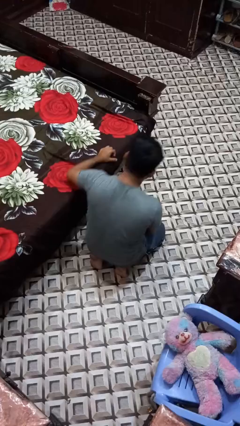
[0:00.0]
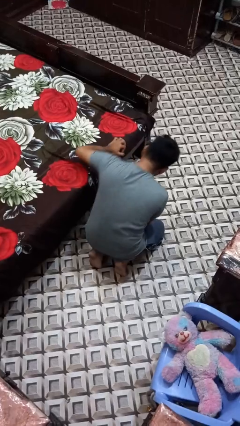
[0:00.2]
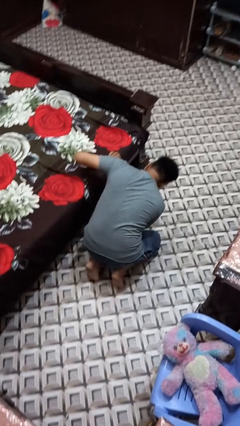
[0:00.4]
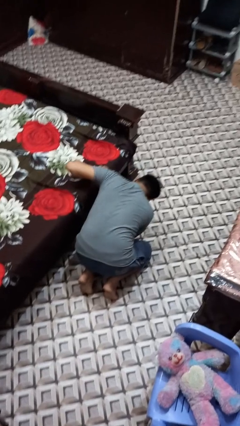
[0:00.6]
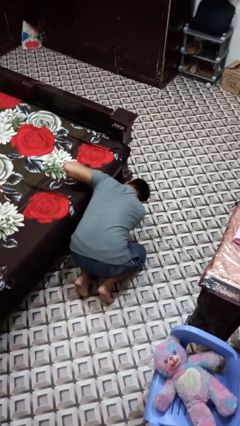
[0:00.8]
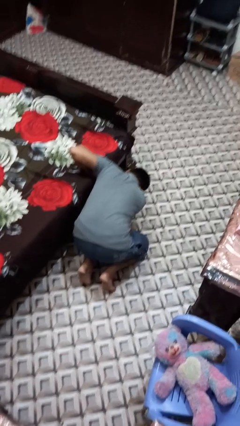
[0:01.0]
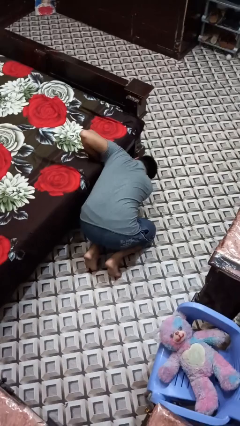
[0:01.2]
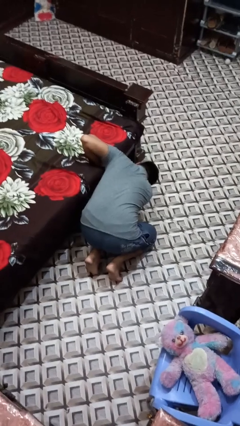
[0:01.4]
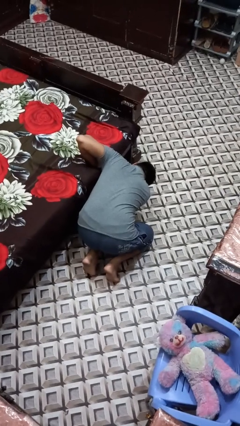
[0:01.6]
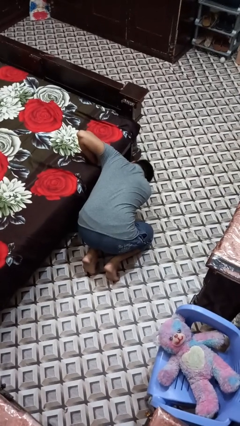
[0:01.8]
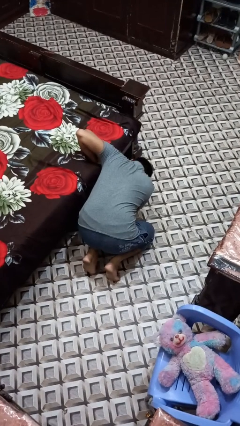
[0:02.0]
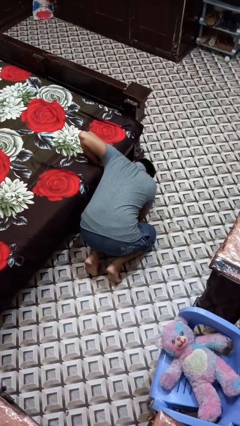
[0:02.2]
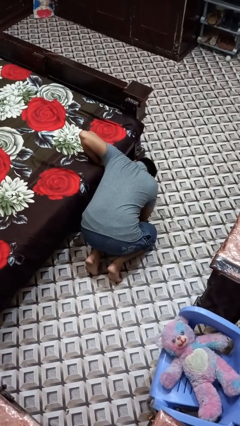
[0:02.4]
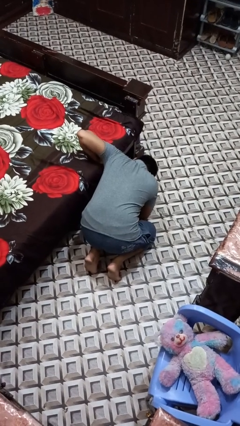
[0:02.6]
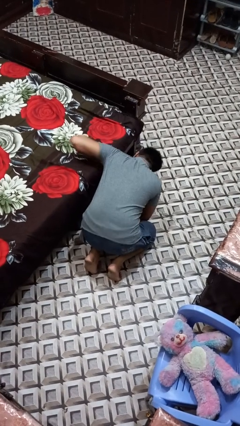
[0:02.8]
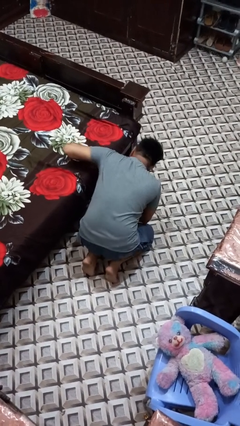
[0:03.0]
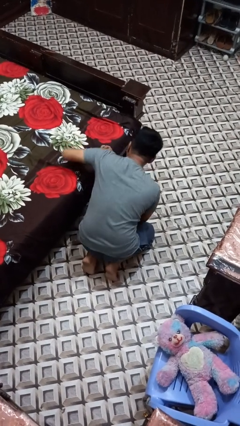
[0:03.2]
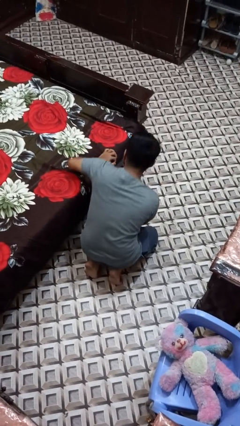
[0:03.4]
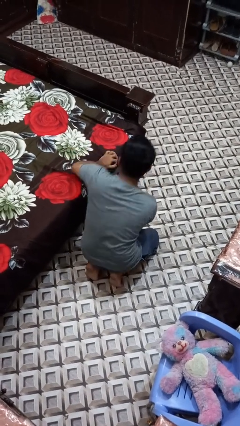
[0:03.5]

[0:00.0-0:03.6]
person searches under bed

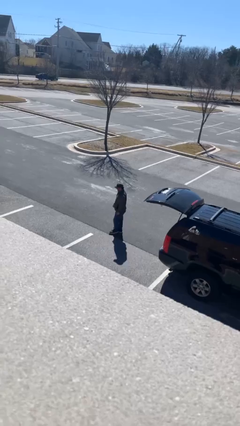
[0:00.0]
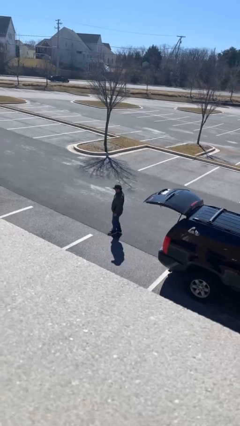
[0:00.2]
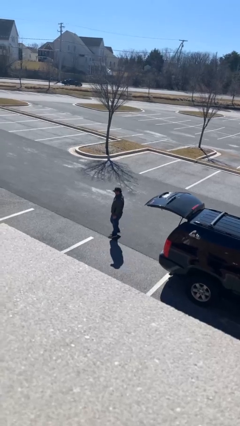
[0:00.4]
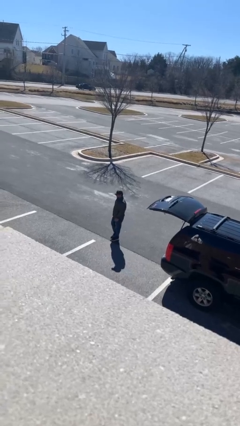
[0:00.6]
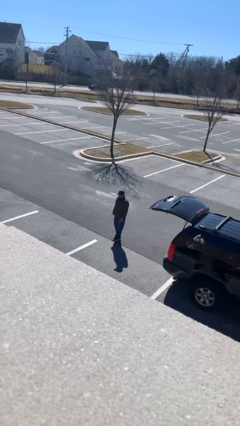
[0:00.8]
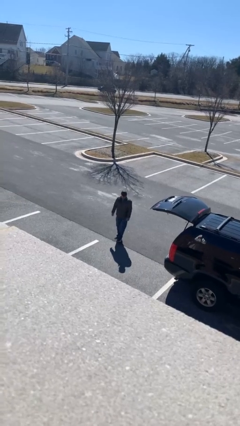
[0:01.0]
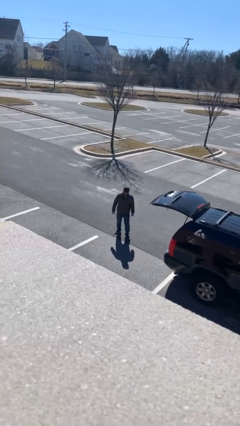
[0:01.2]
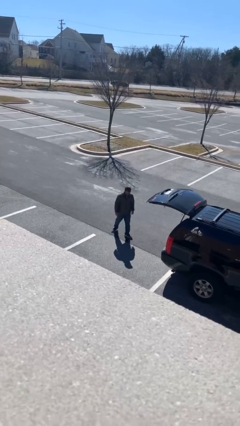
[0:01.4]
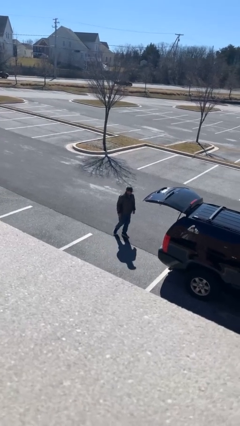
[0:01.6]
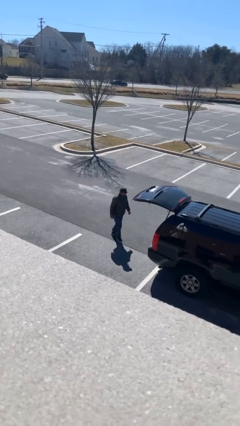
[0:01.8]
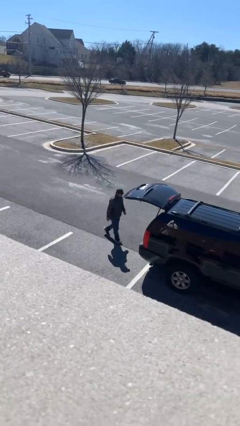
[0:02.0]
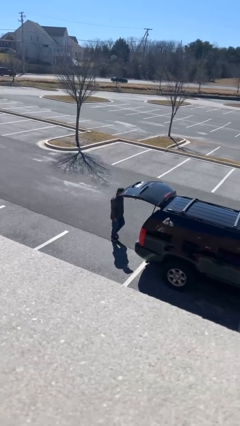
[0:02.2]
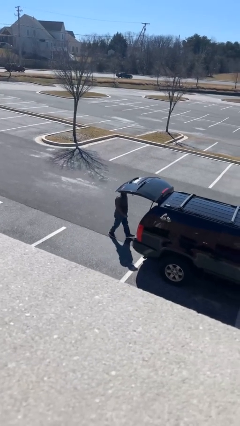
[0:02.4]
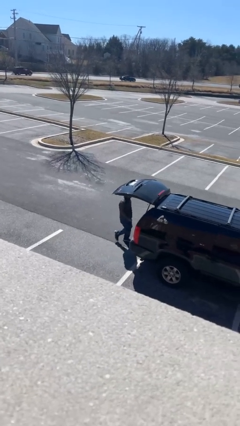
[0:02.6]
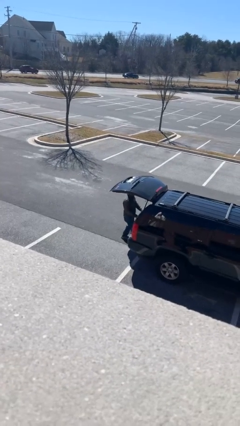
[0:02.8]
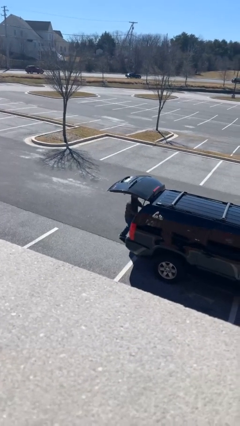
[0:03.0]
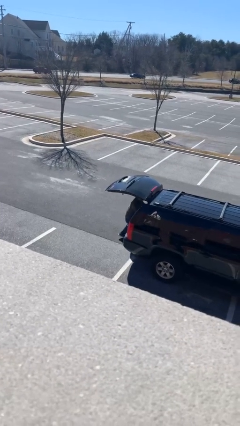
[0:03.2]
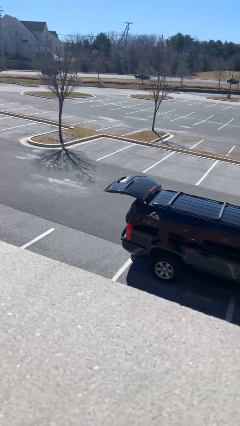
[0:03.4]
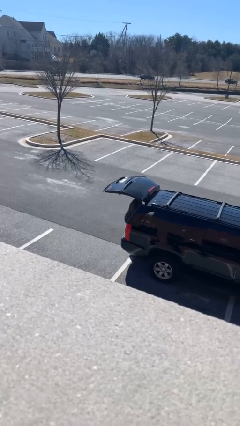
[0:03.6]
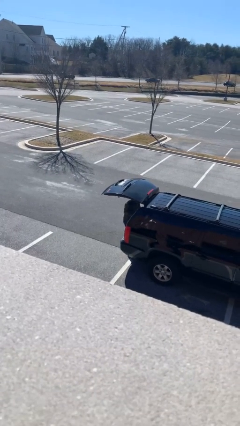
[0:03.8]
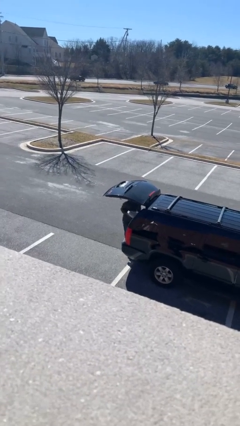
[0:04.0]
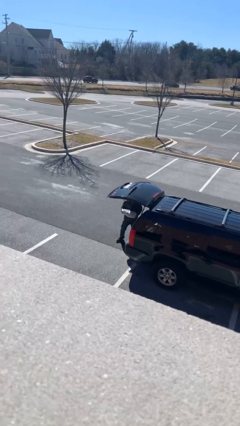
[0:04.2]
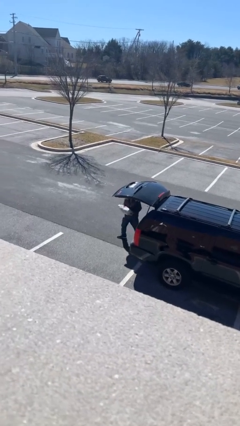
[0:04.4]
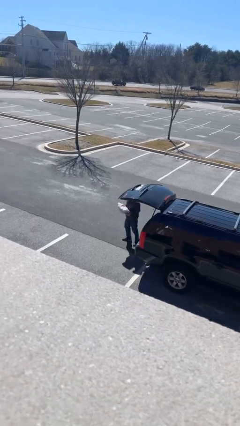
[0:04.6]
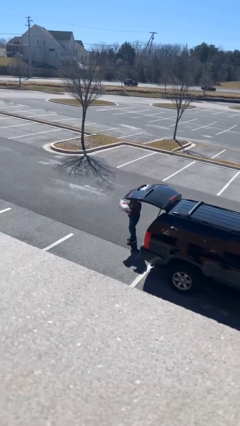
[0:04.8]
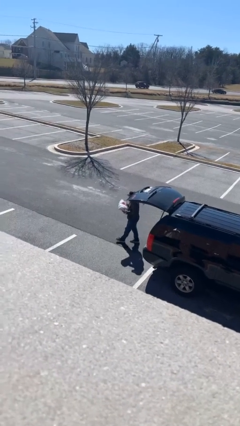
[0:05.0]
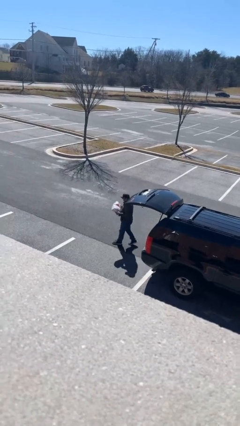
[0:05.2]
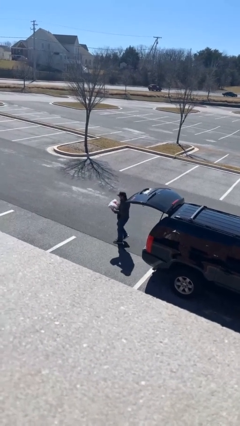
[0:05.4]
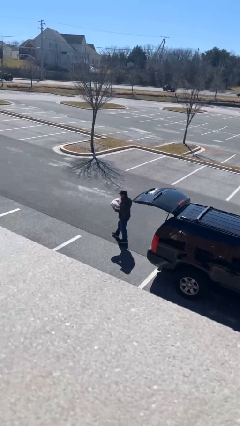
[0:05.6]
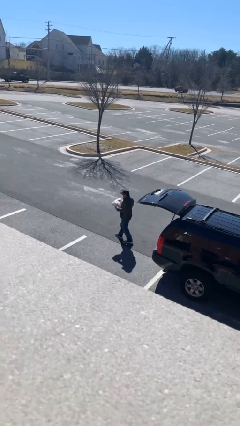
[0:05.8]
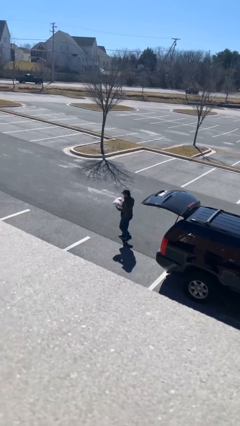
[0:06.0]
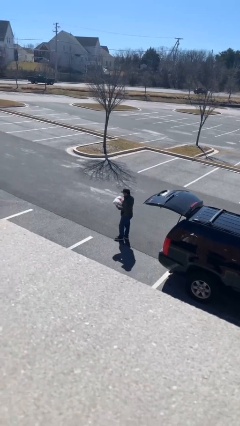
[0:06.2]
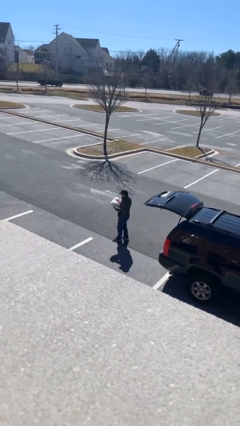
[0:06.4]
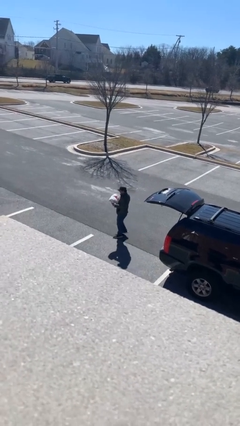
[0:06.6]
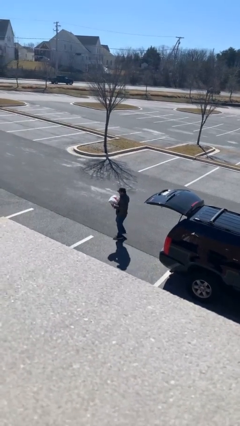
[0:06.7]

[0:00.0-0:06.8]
person unloads car

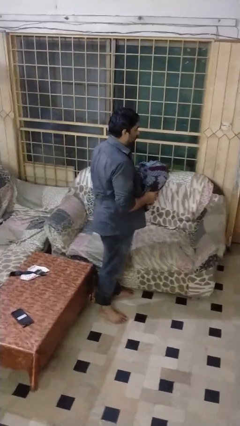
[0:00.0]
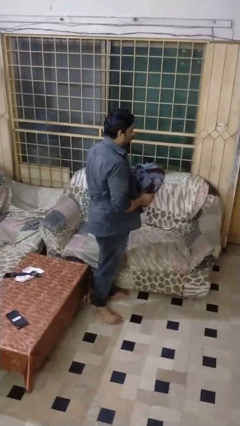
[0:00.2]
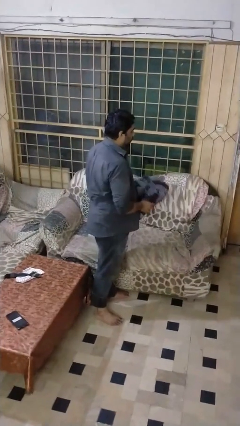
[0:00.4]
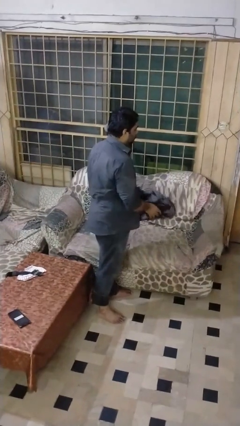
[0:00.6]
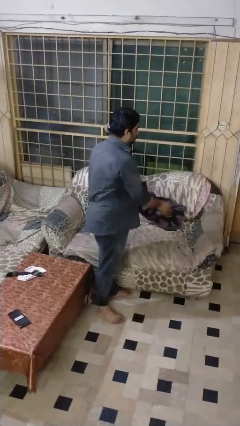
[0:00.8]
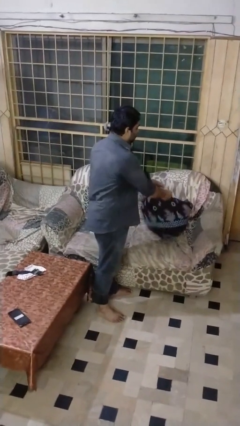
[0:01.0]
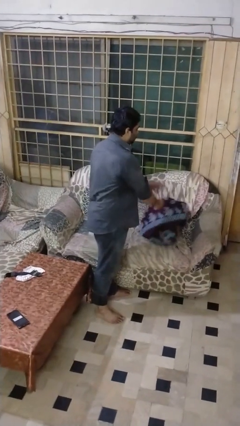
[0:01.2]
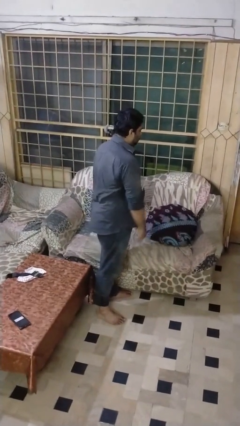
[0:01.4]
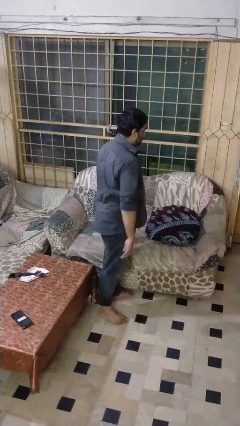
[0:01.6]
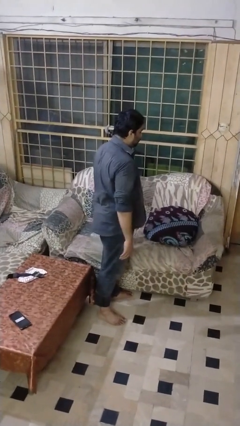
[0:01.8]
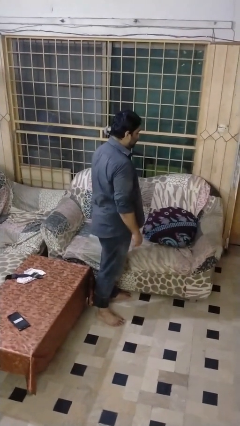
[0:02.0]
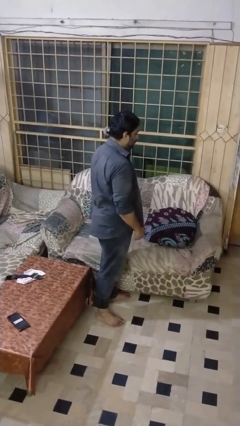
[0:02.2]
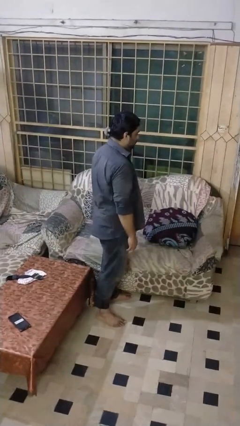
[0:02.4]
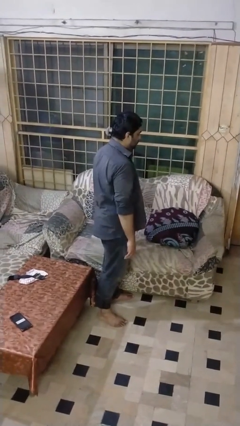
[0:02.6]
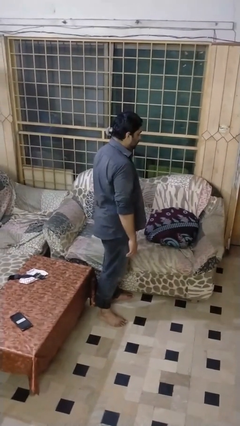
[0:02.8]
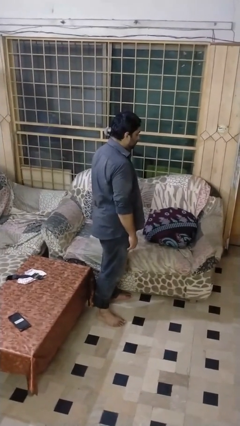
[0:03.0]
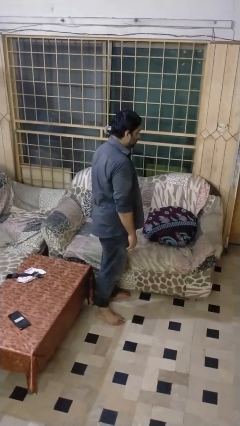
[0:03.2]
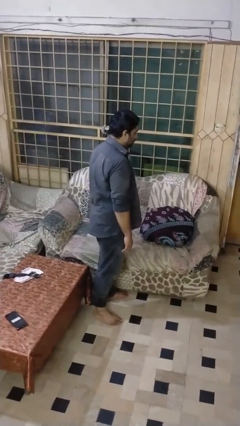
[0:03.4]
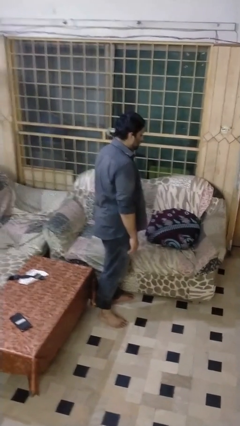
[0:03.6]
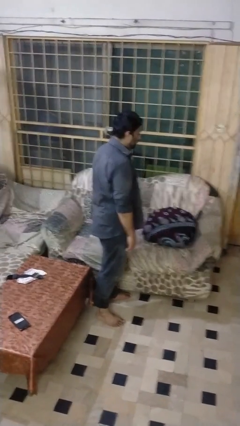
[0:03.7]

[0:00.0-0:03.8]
person puts down object on couch

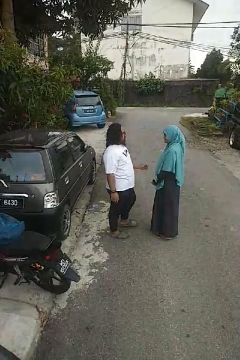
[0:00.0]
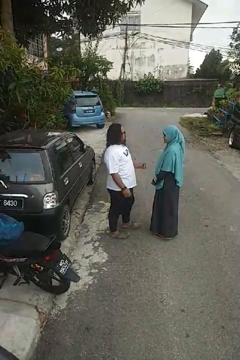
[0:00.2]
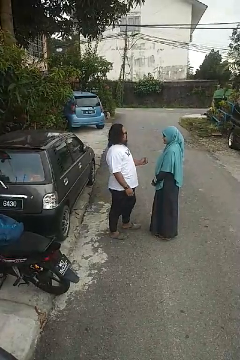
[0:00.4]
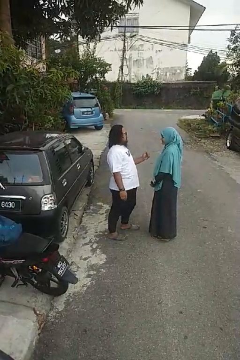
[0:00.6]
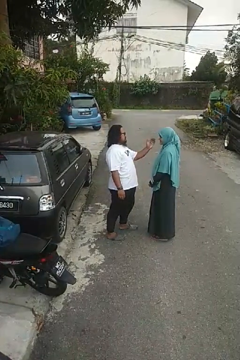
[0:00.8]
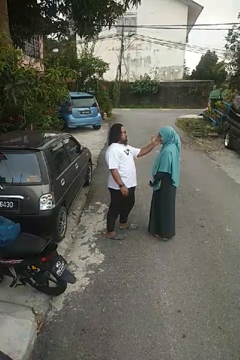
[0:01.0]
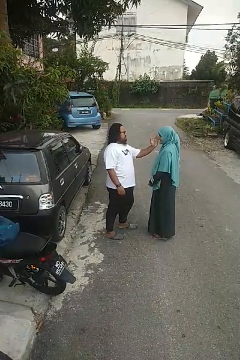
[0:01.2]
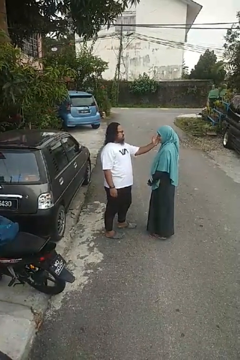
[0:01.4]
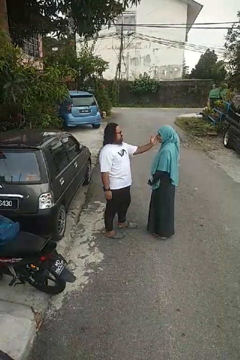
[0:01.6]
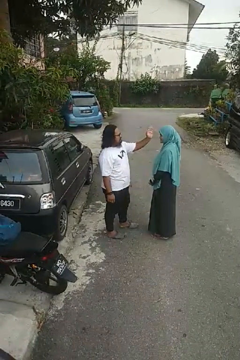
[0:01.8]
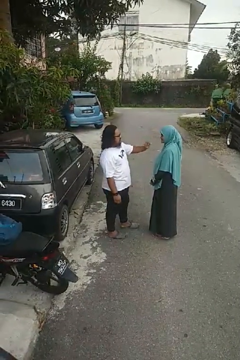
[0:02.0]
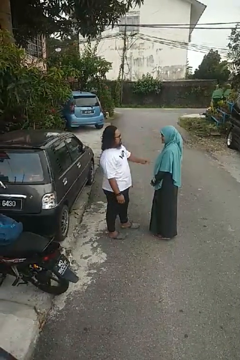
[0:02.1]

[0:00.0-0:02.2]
person touches face of person

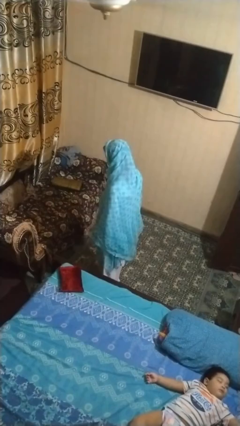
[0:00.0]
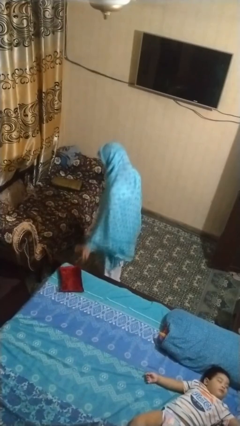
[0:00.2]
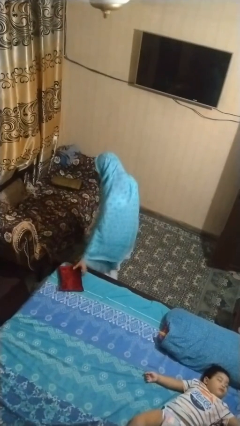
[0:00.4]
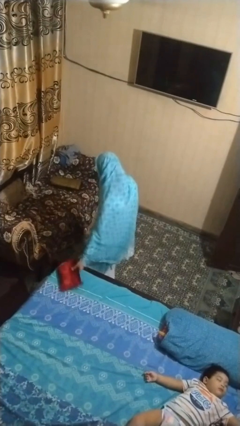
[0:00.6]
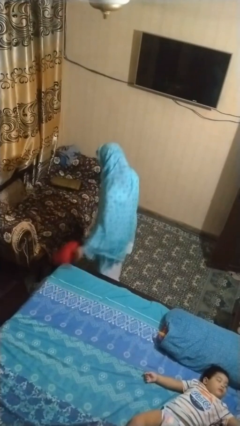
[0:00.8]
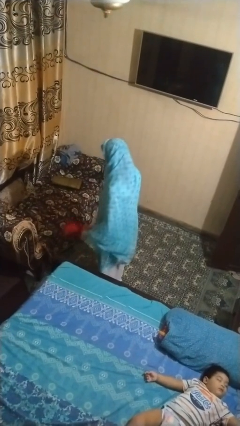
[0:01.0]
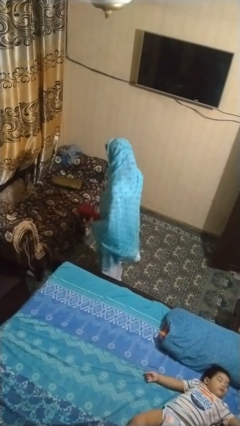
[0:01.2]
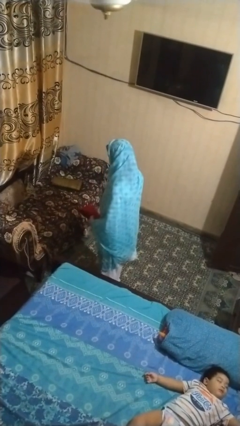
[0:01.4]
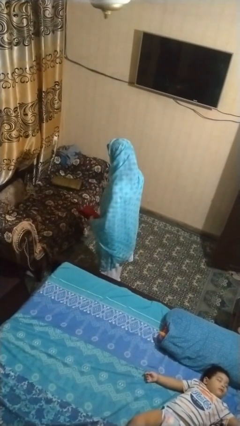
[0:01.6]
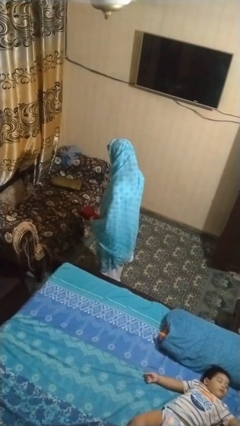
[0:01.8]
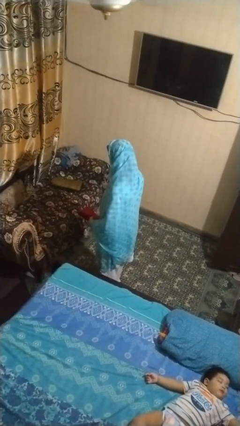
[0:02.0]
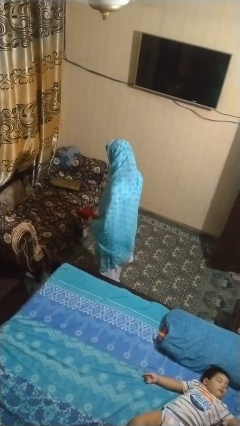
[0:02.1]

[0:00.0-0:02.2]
person picks up object from bed
